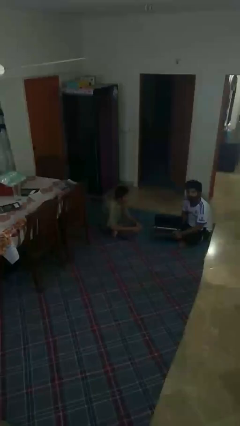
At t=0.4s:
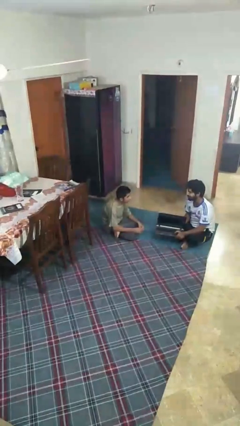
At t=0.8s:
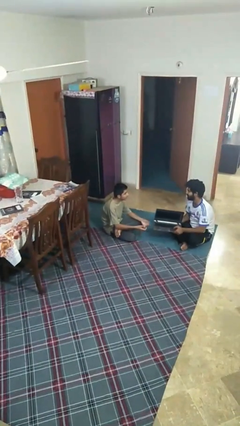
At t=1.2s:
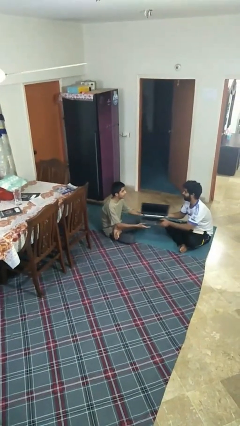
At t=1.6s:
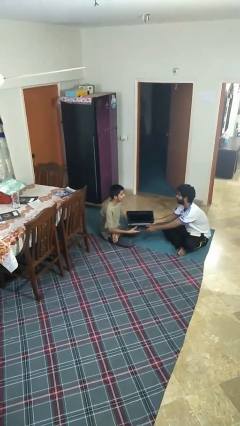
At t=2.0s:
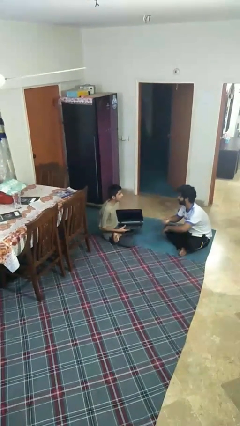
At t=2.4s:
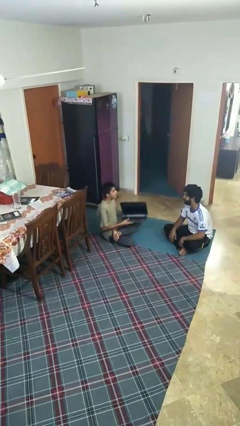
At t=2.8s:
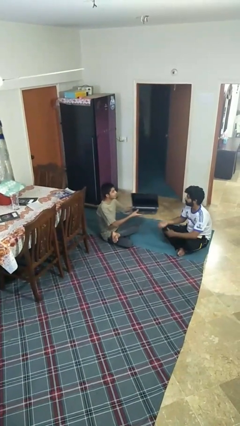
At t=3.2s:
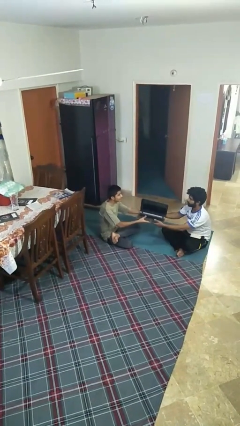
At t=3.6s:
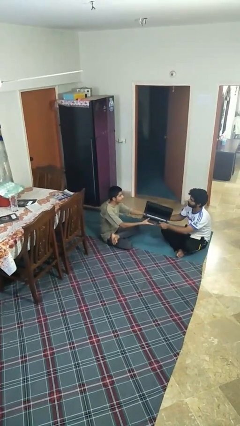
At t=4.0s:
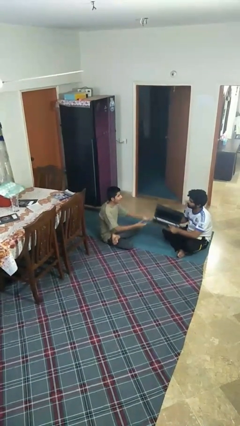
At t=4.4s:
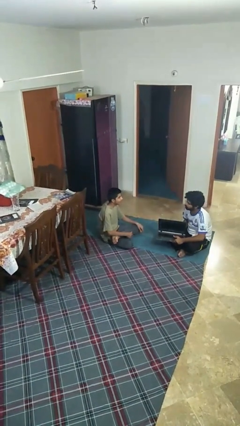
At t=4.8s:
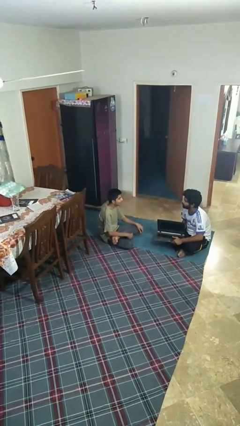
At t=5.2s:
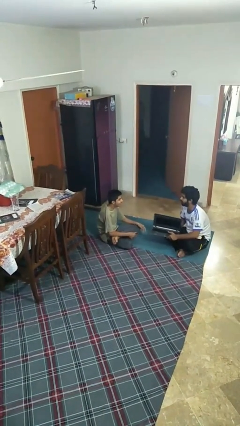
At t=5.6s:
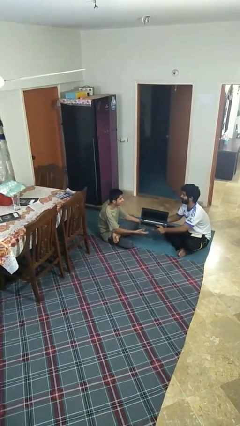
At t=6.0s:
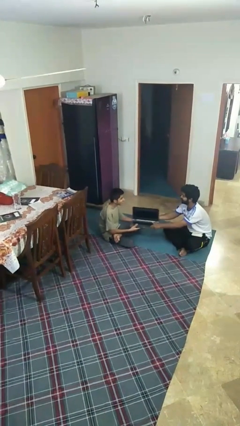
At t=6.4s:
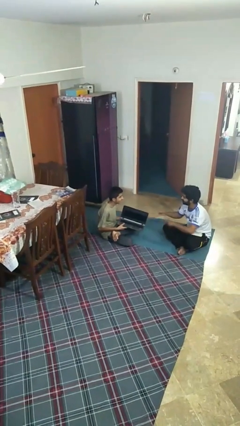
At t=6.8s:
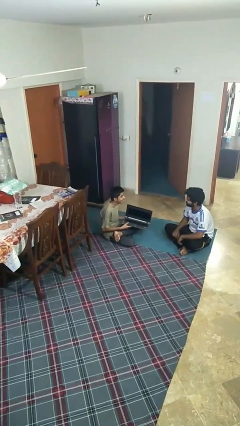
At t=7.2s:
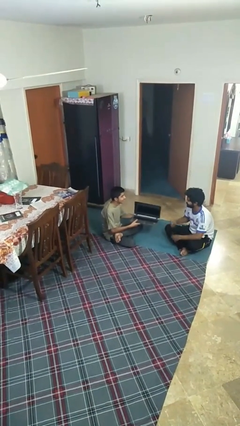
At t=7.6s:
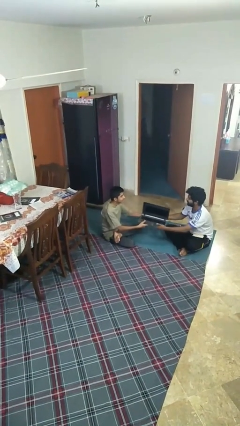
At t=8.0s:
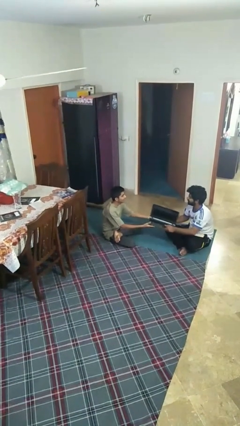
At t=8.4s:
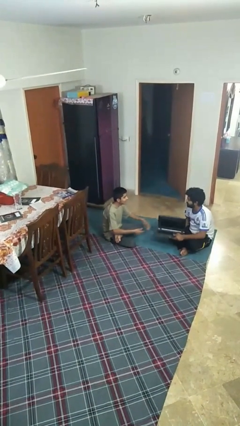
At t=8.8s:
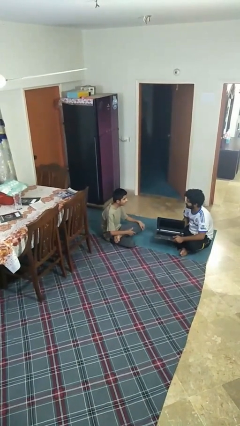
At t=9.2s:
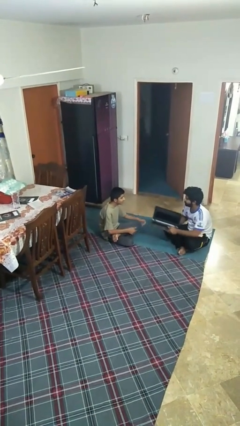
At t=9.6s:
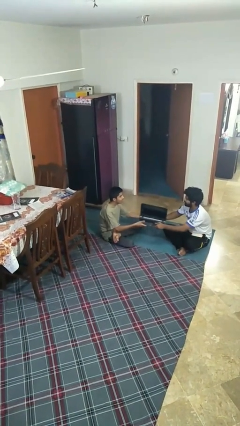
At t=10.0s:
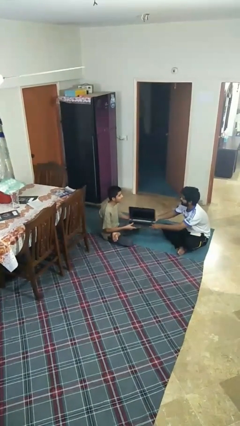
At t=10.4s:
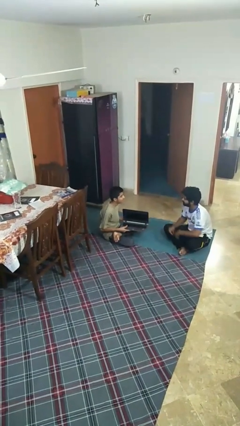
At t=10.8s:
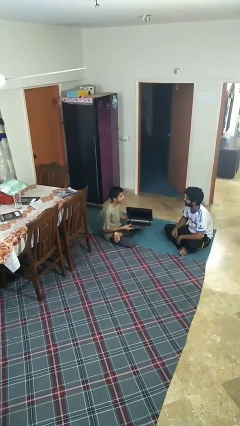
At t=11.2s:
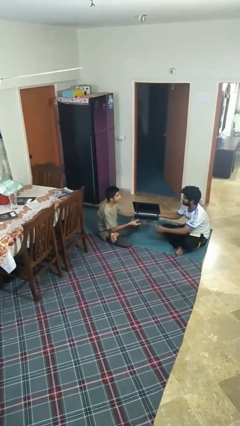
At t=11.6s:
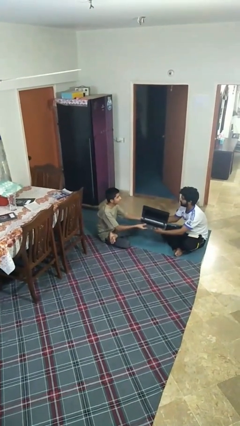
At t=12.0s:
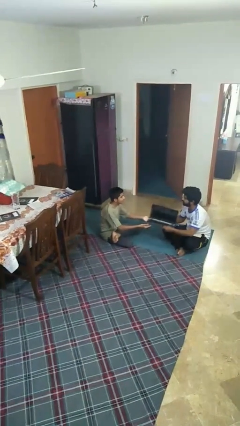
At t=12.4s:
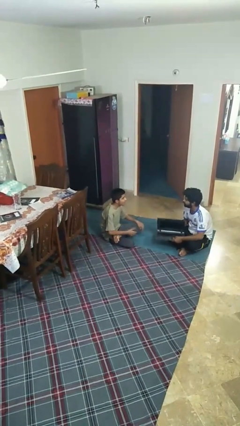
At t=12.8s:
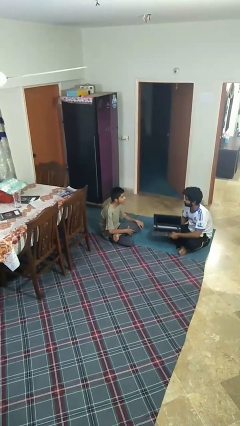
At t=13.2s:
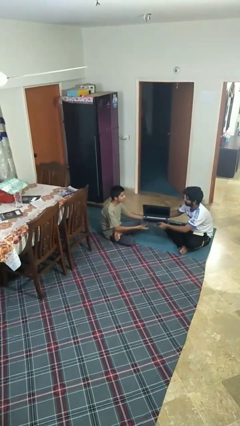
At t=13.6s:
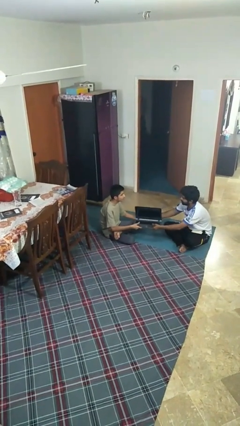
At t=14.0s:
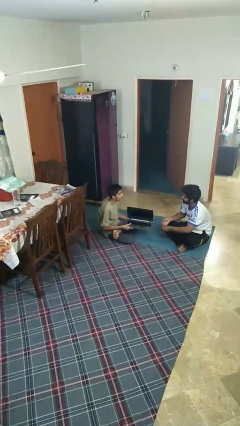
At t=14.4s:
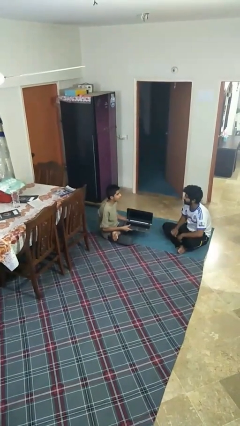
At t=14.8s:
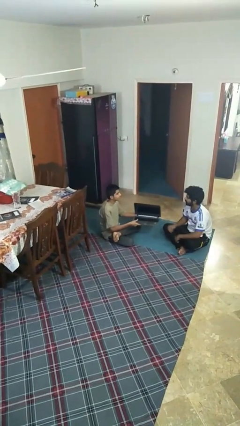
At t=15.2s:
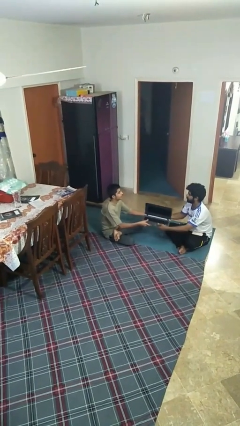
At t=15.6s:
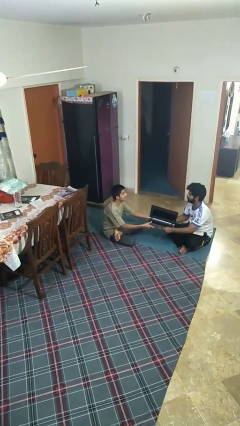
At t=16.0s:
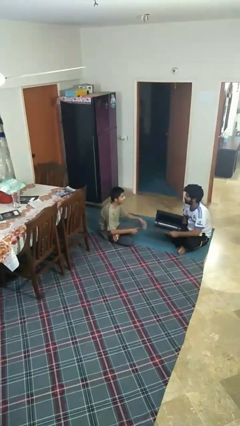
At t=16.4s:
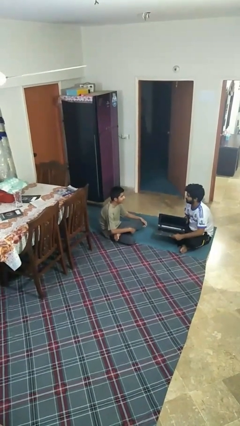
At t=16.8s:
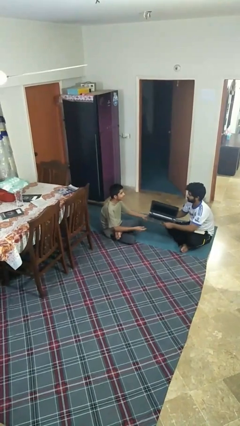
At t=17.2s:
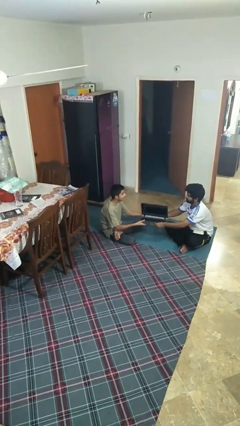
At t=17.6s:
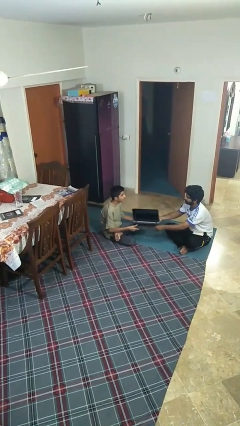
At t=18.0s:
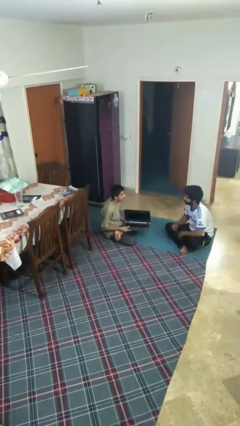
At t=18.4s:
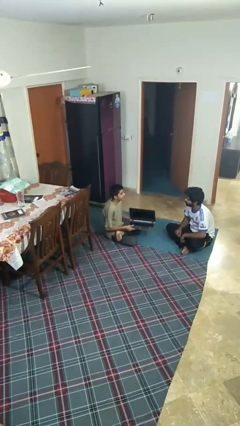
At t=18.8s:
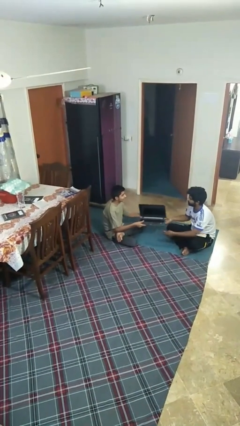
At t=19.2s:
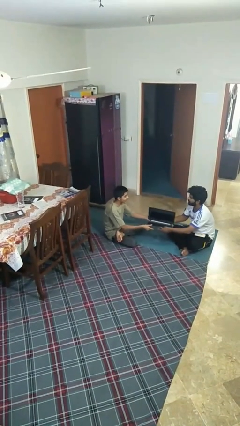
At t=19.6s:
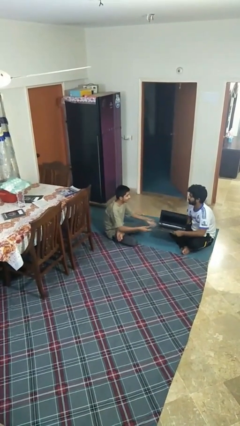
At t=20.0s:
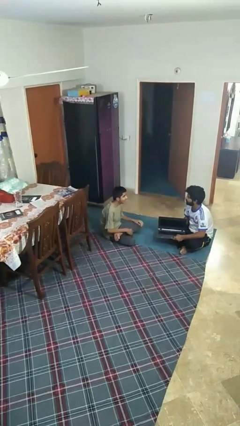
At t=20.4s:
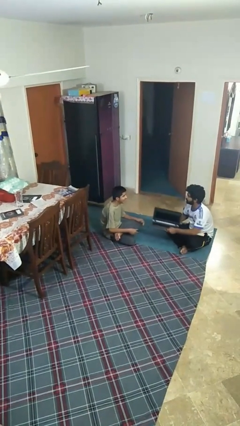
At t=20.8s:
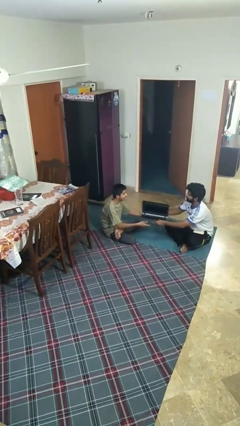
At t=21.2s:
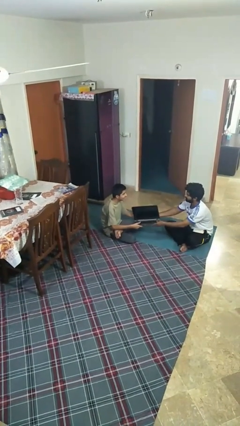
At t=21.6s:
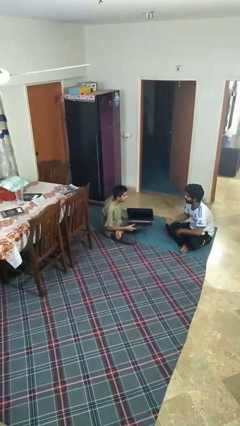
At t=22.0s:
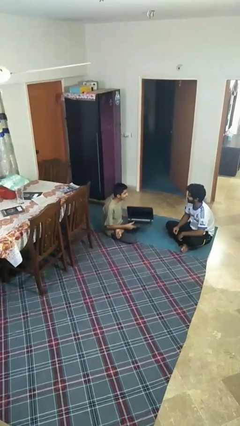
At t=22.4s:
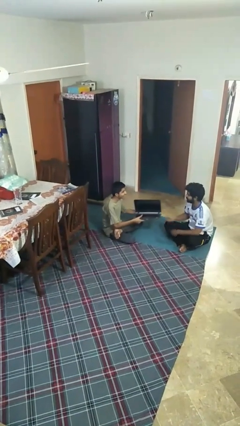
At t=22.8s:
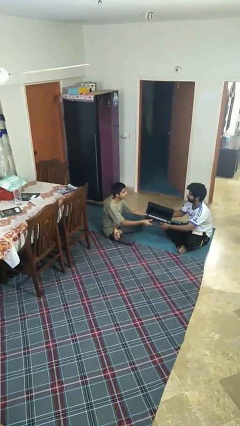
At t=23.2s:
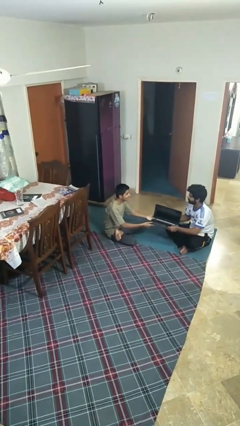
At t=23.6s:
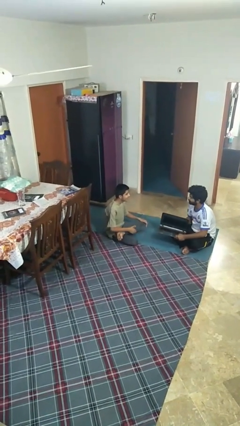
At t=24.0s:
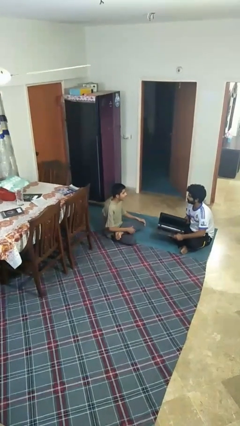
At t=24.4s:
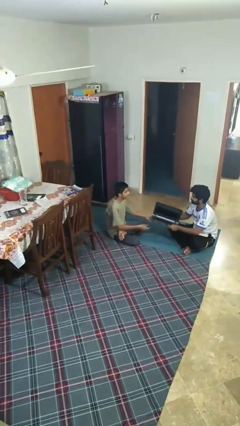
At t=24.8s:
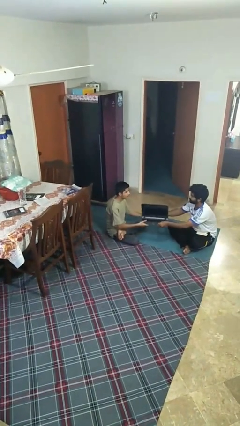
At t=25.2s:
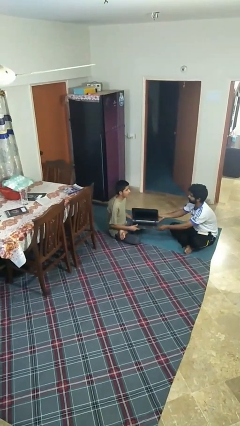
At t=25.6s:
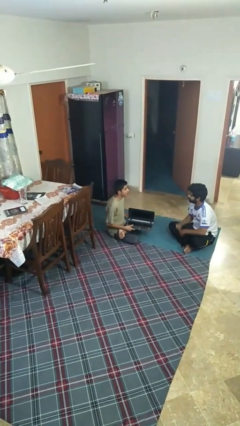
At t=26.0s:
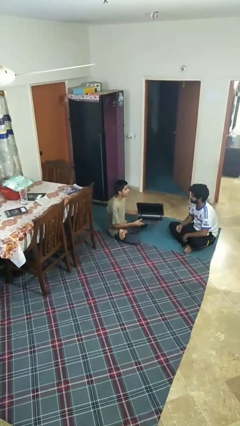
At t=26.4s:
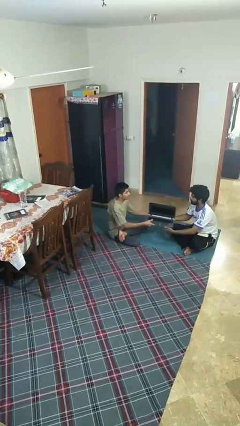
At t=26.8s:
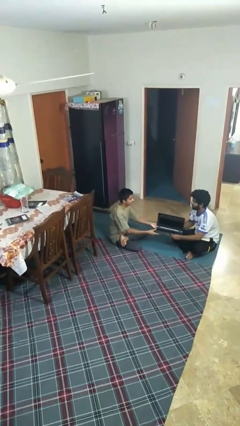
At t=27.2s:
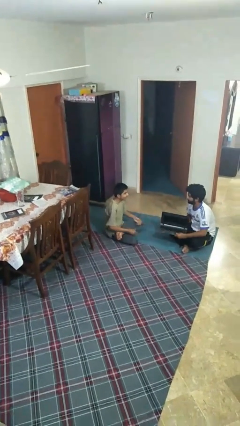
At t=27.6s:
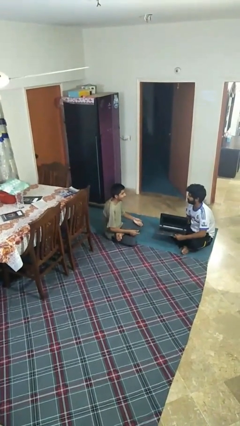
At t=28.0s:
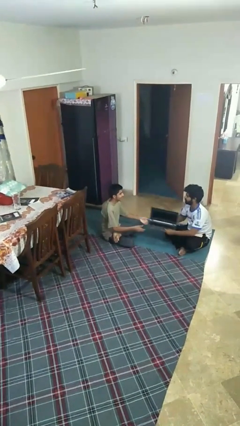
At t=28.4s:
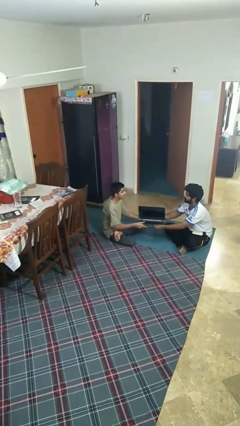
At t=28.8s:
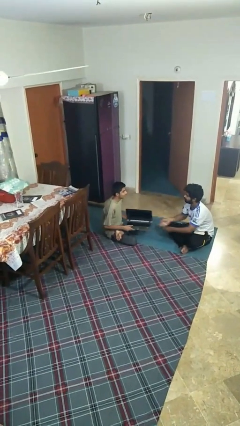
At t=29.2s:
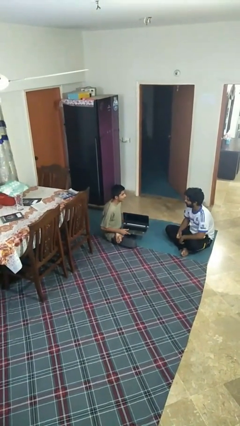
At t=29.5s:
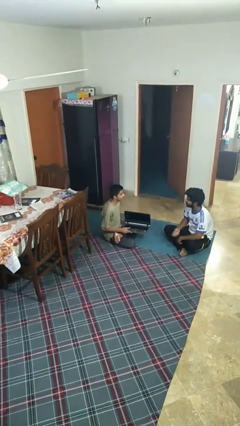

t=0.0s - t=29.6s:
person transfers object to person

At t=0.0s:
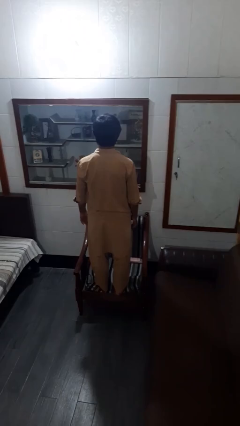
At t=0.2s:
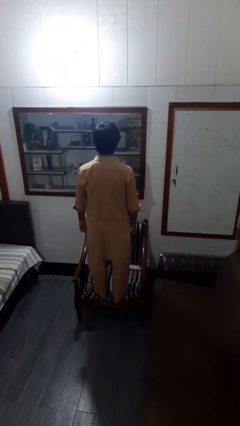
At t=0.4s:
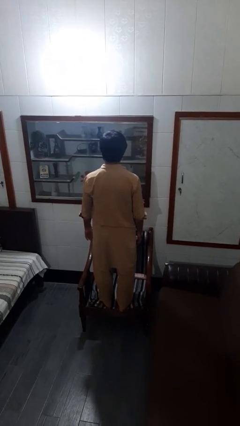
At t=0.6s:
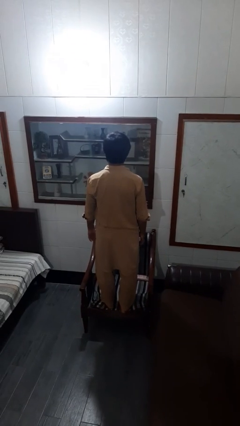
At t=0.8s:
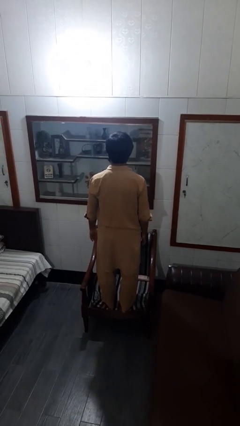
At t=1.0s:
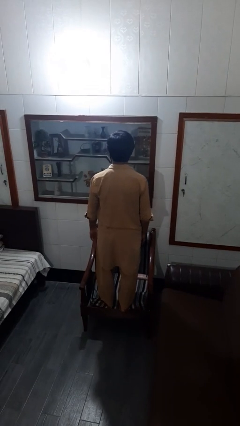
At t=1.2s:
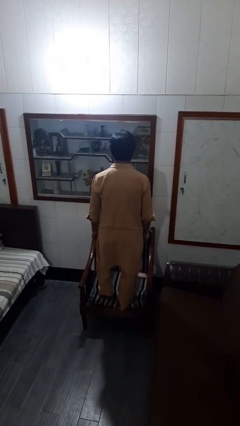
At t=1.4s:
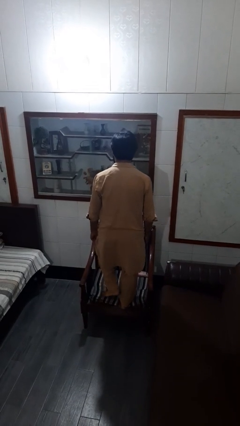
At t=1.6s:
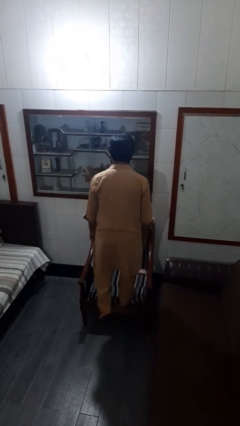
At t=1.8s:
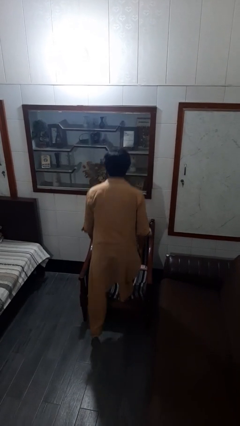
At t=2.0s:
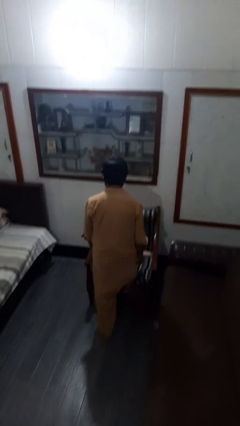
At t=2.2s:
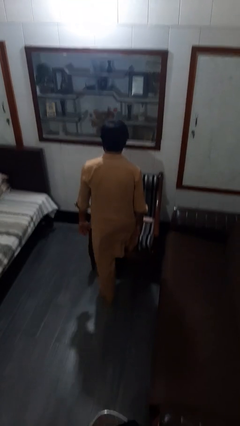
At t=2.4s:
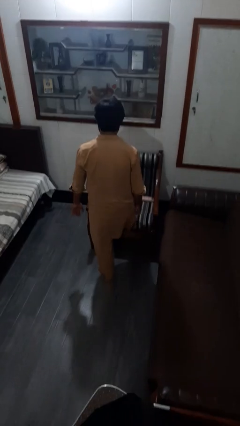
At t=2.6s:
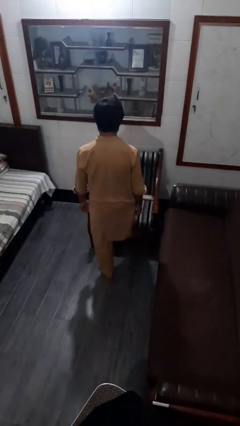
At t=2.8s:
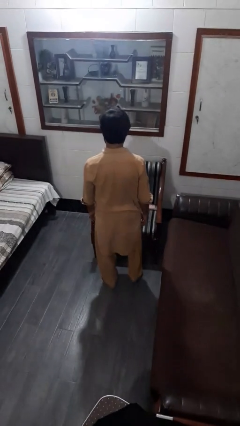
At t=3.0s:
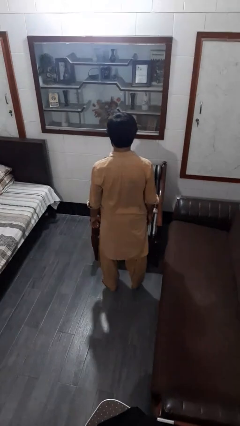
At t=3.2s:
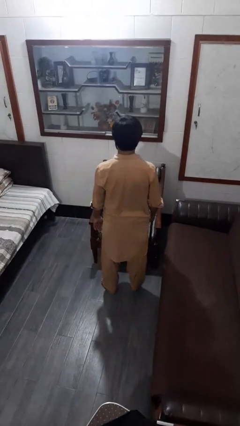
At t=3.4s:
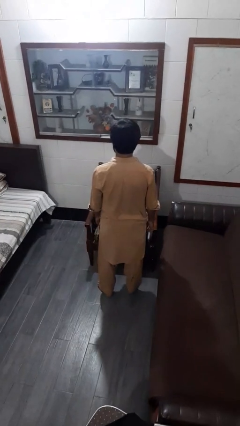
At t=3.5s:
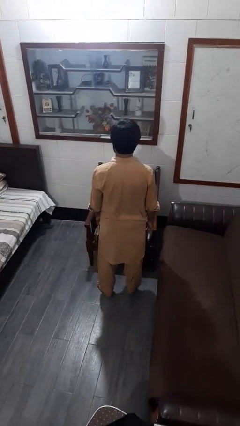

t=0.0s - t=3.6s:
person climbs off chair
